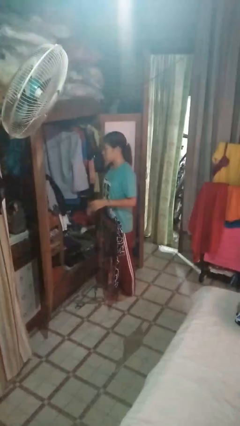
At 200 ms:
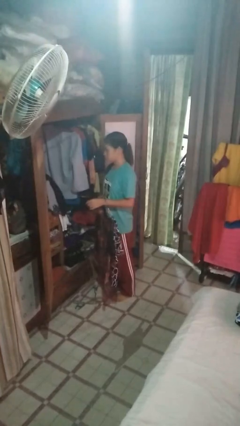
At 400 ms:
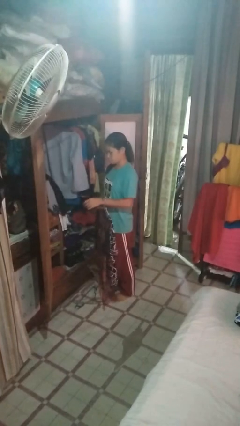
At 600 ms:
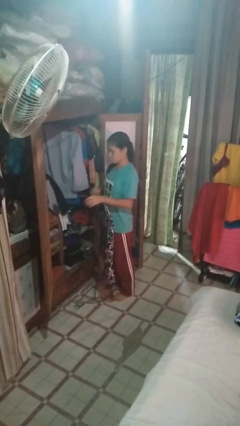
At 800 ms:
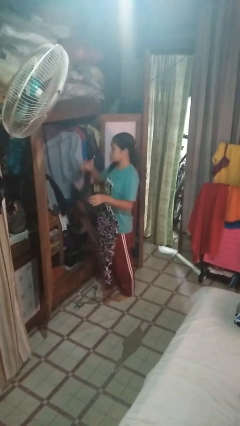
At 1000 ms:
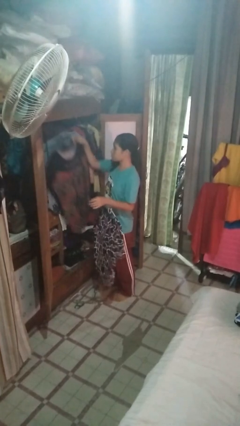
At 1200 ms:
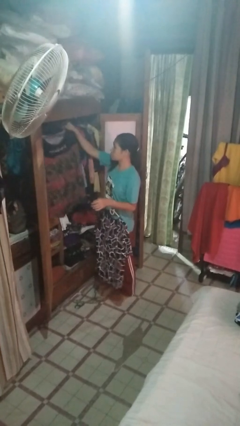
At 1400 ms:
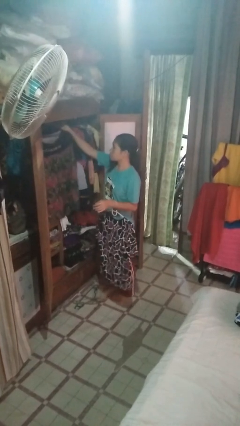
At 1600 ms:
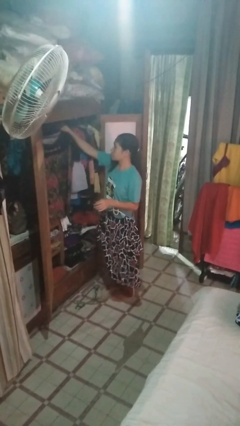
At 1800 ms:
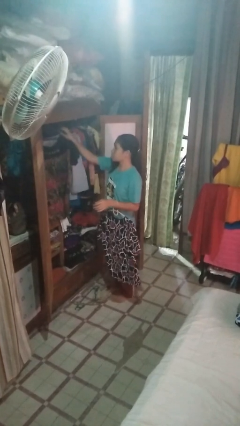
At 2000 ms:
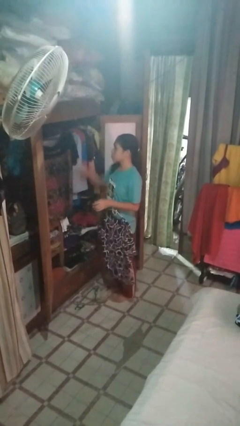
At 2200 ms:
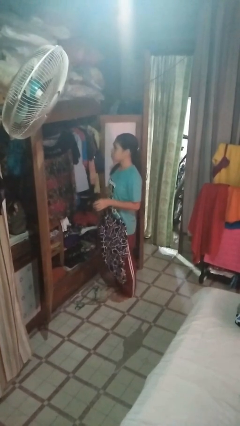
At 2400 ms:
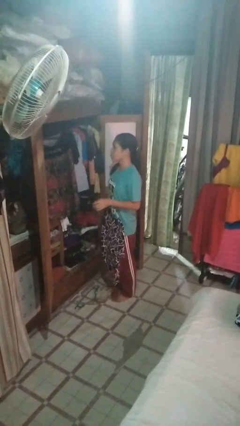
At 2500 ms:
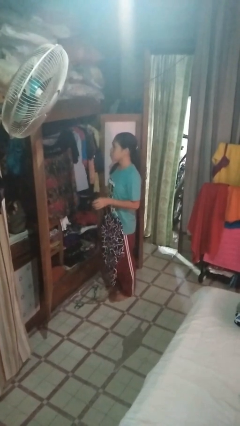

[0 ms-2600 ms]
person puts clothes into closet

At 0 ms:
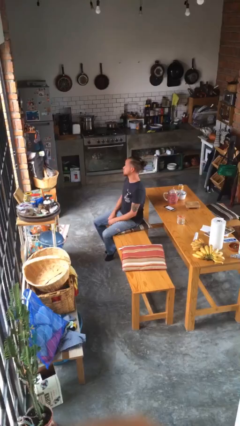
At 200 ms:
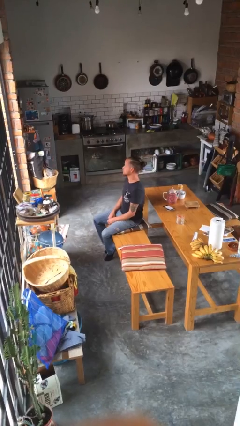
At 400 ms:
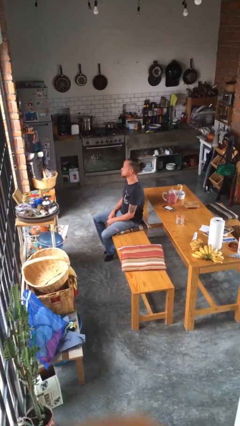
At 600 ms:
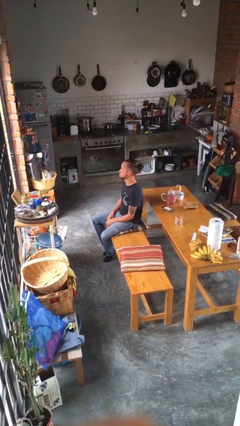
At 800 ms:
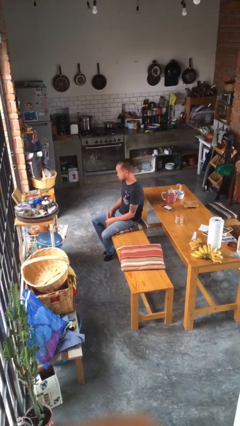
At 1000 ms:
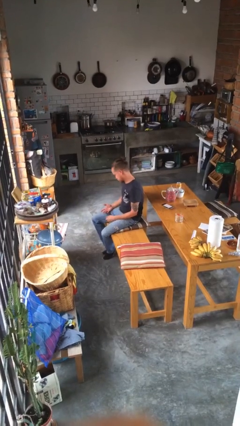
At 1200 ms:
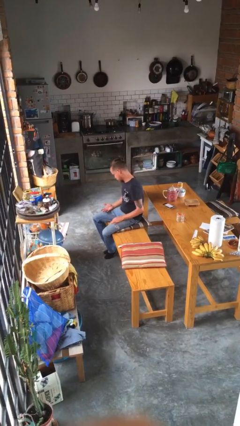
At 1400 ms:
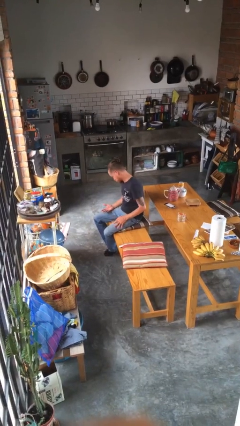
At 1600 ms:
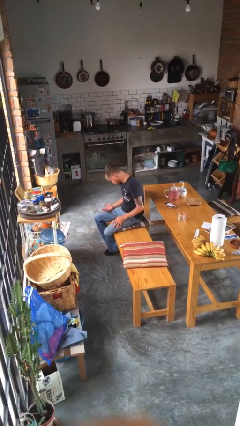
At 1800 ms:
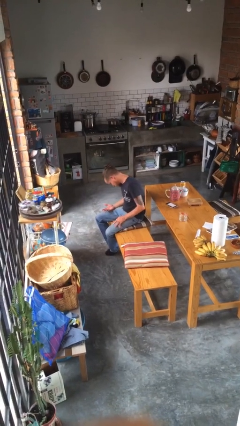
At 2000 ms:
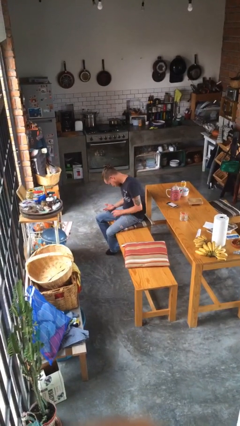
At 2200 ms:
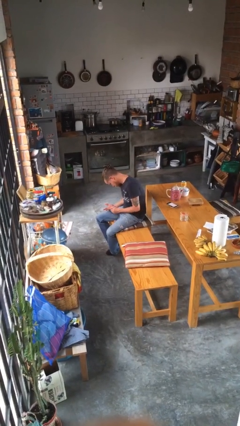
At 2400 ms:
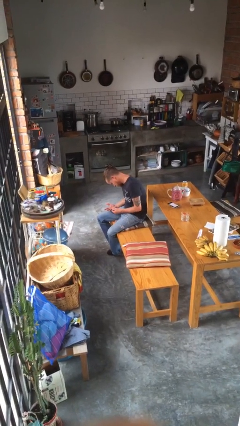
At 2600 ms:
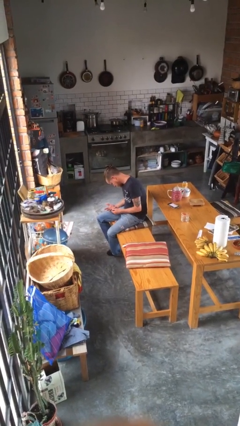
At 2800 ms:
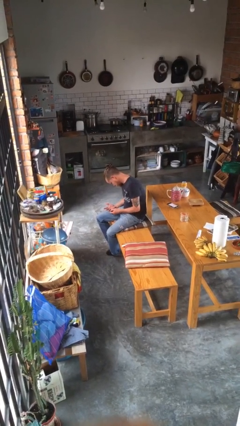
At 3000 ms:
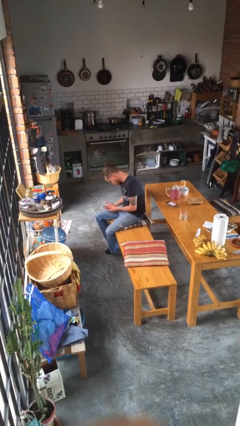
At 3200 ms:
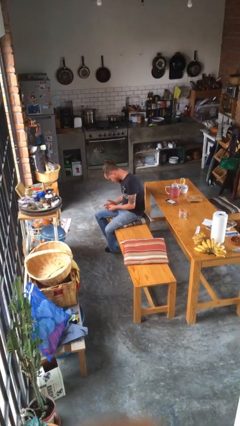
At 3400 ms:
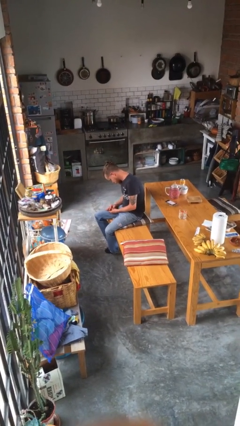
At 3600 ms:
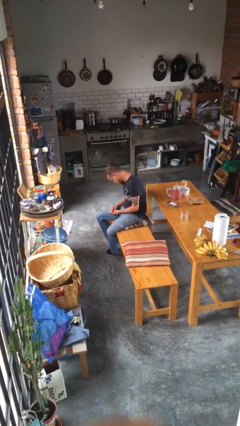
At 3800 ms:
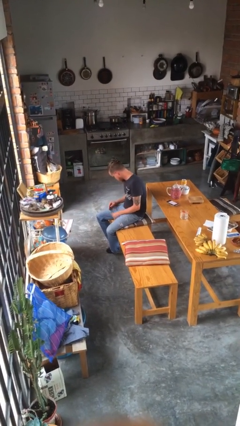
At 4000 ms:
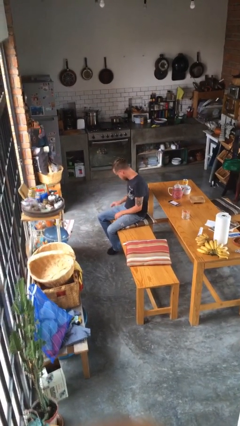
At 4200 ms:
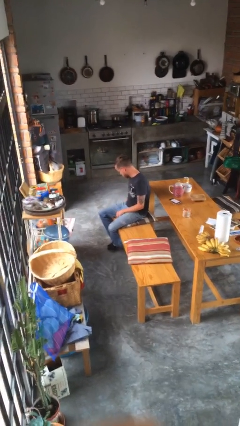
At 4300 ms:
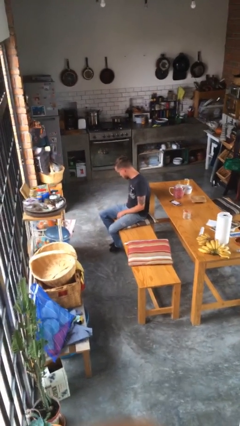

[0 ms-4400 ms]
person looks at hands in lap

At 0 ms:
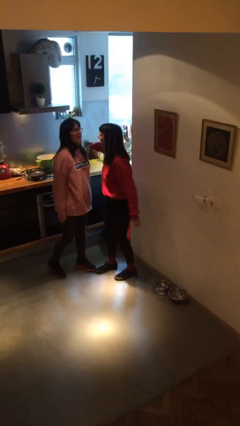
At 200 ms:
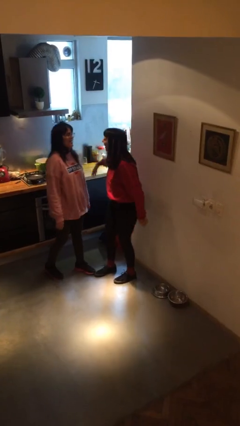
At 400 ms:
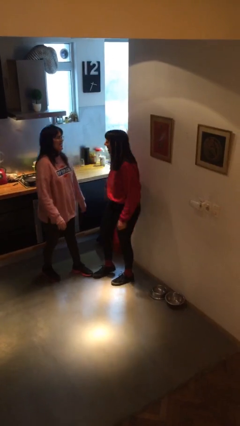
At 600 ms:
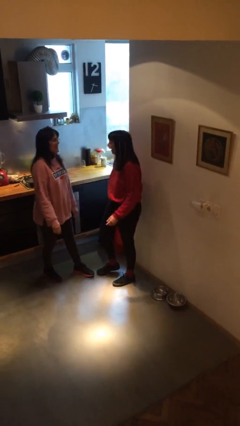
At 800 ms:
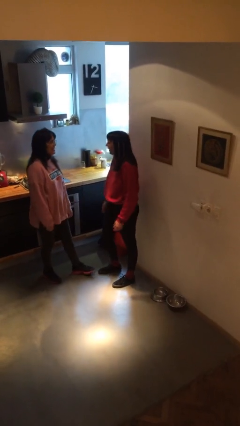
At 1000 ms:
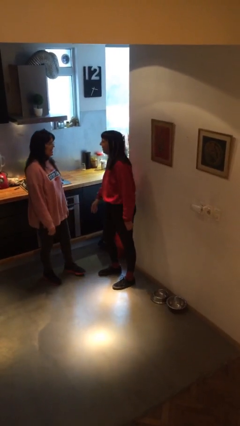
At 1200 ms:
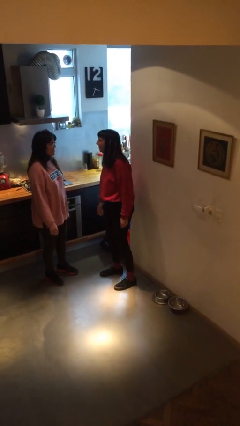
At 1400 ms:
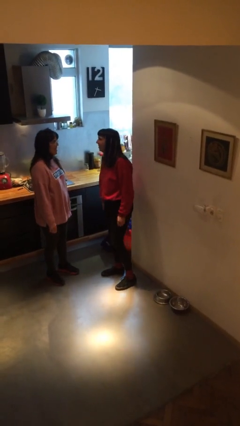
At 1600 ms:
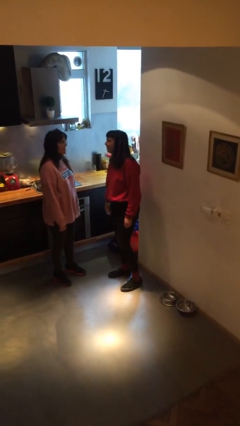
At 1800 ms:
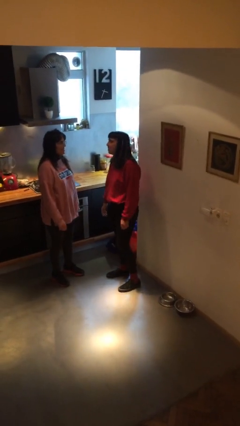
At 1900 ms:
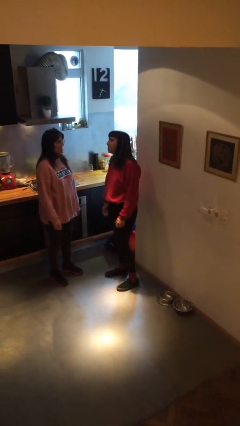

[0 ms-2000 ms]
person talks to person

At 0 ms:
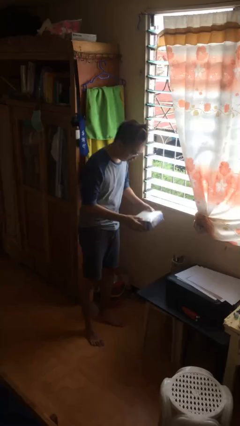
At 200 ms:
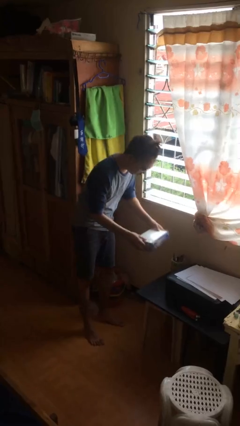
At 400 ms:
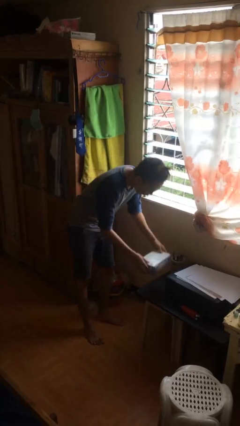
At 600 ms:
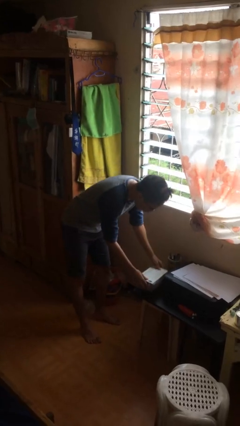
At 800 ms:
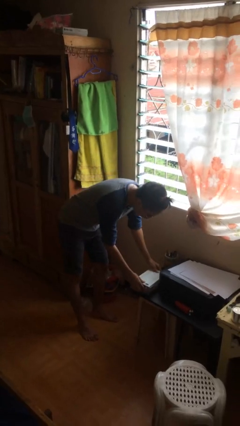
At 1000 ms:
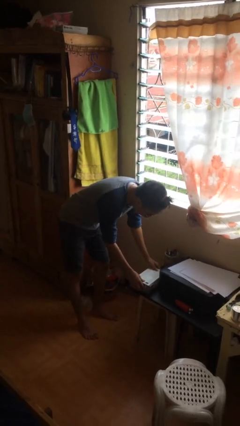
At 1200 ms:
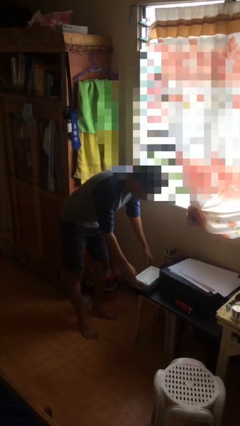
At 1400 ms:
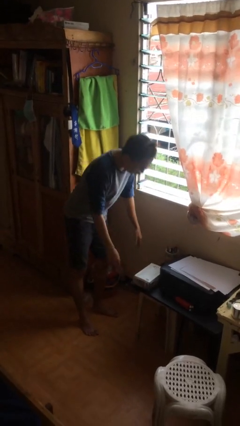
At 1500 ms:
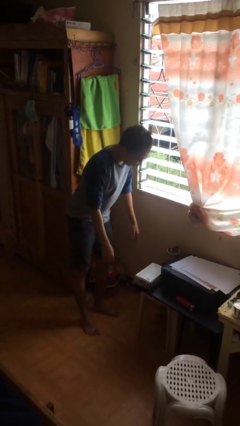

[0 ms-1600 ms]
person puts down object on table

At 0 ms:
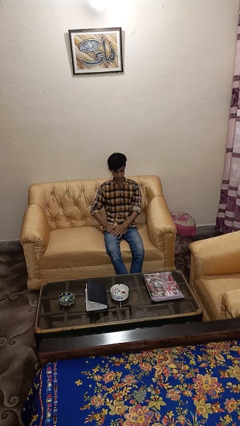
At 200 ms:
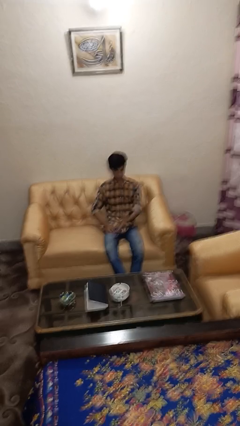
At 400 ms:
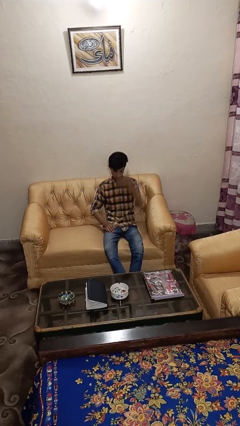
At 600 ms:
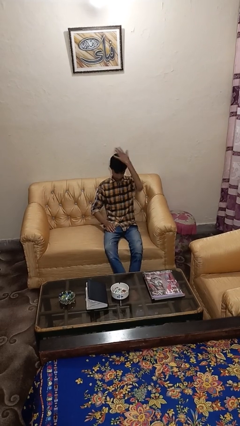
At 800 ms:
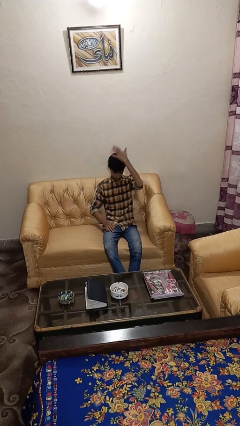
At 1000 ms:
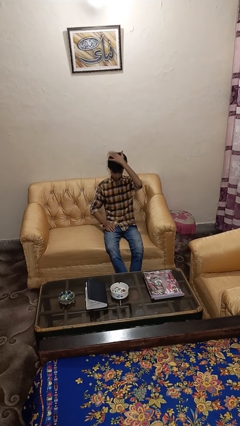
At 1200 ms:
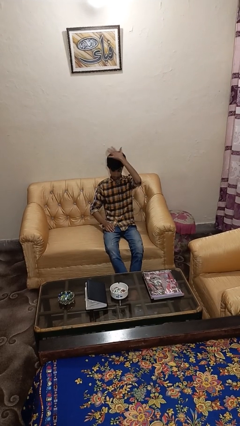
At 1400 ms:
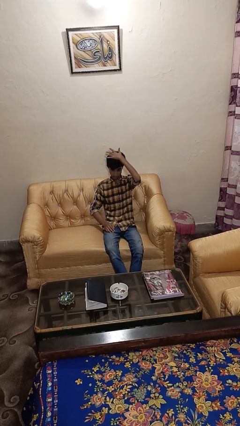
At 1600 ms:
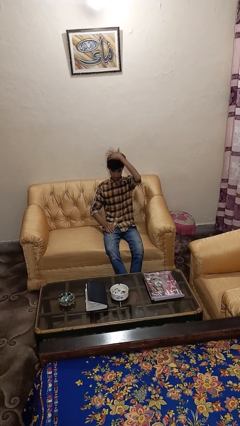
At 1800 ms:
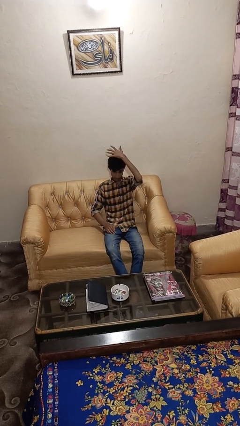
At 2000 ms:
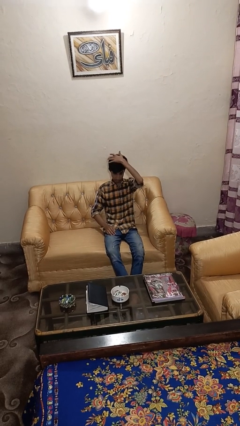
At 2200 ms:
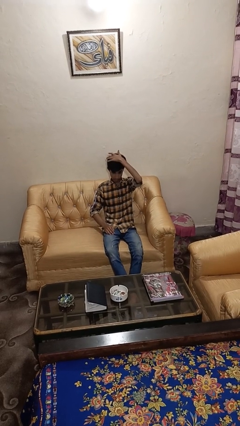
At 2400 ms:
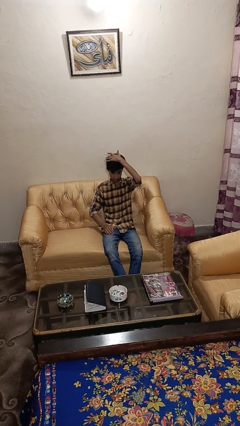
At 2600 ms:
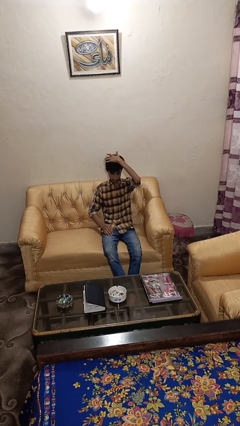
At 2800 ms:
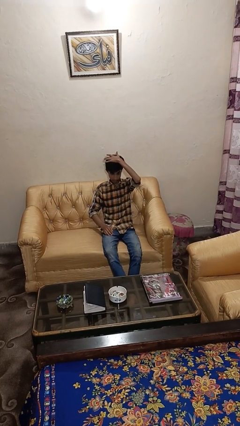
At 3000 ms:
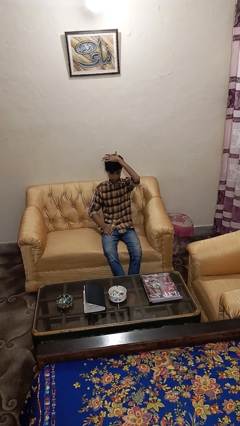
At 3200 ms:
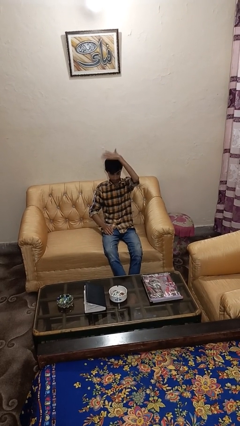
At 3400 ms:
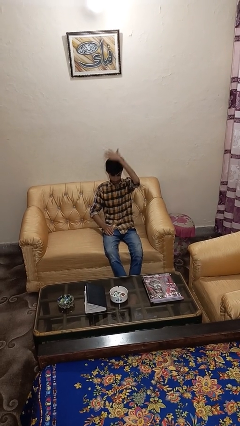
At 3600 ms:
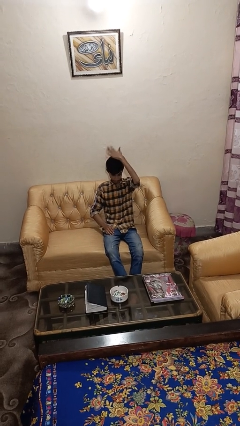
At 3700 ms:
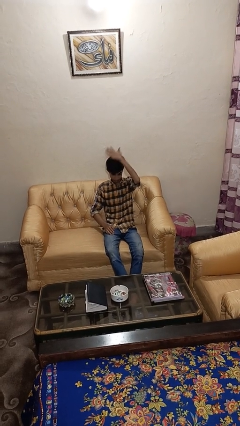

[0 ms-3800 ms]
person pats head

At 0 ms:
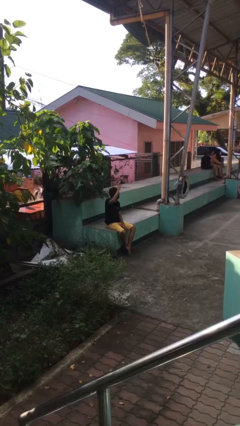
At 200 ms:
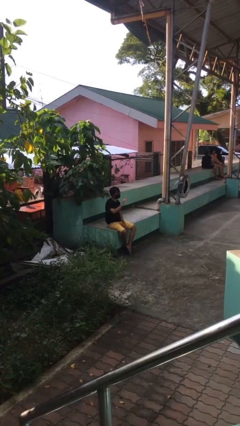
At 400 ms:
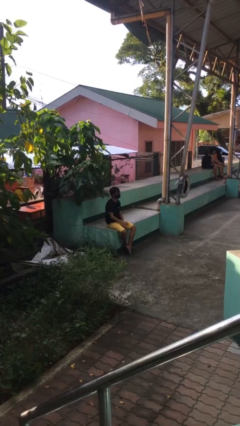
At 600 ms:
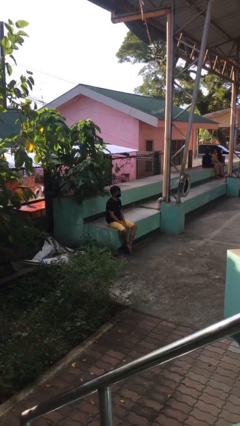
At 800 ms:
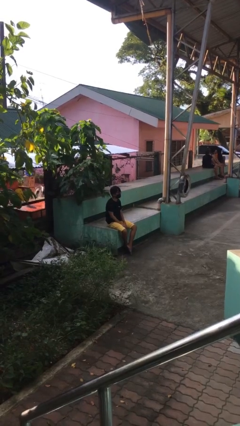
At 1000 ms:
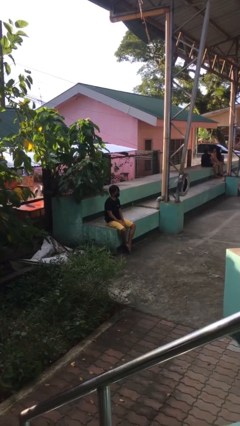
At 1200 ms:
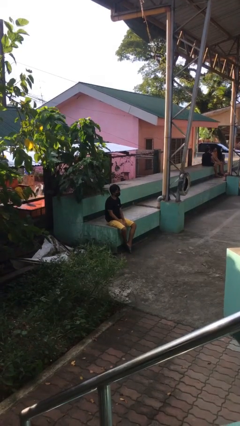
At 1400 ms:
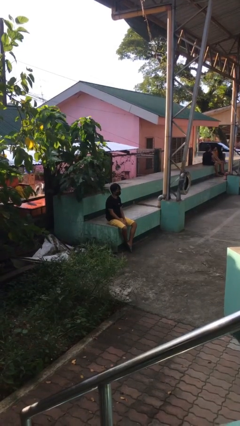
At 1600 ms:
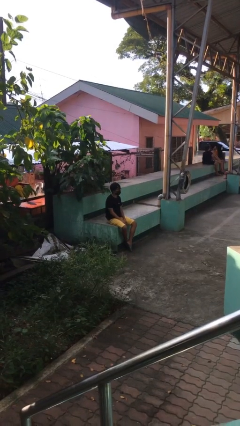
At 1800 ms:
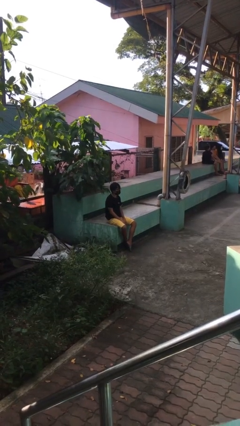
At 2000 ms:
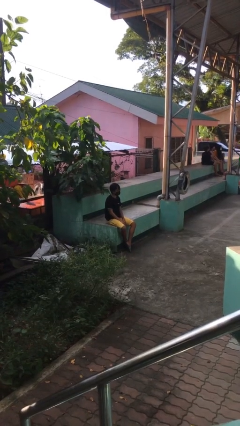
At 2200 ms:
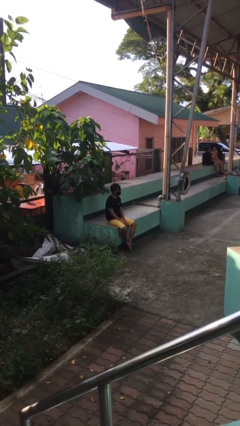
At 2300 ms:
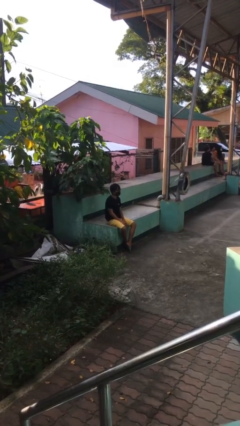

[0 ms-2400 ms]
person gestures lower hand

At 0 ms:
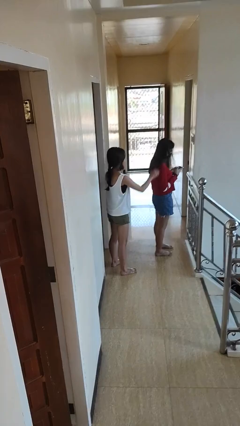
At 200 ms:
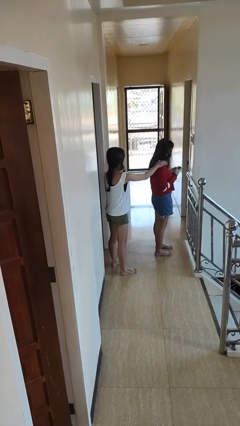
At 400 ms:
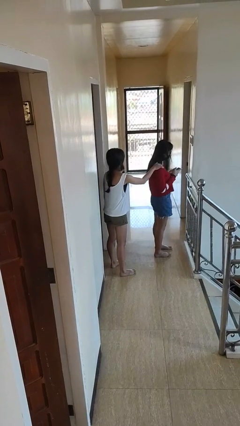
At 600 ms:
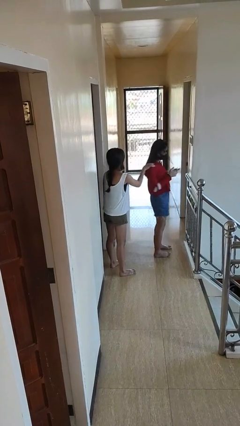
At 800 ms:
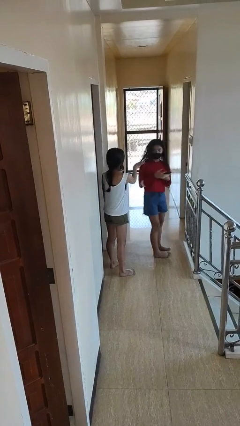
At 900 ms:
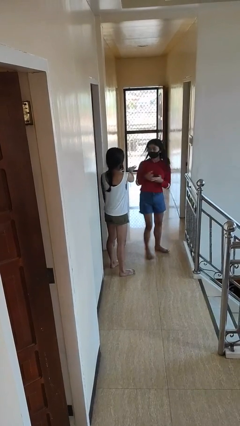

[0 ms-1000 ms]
person grabs person by shoulder
